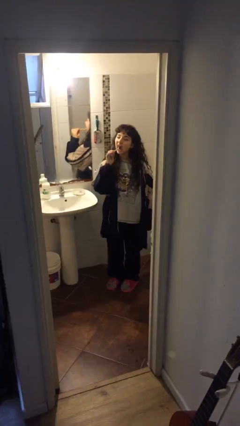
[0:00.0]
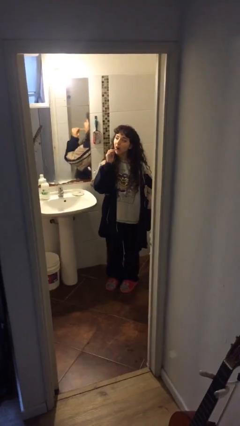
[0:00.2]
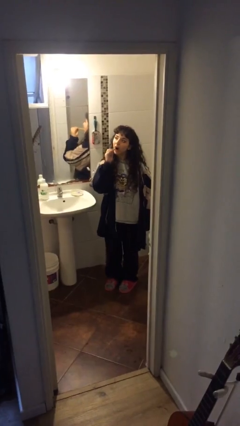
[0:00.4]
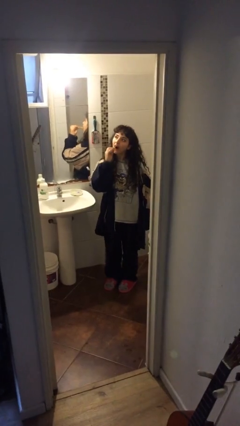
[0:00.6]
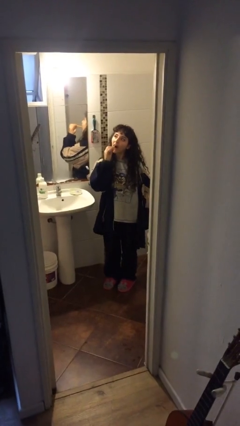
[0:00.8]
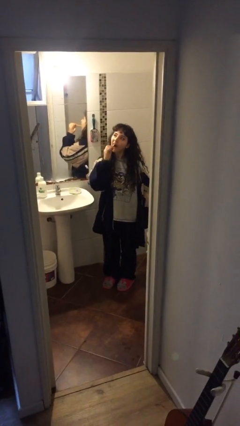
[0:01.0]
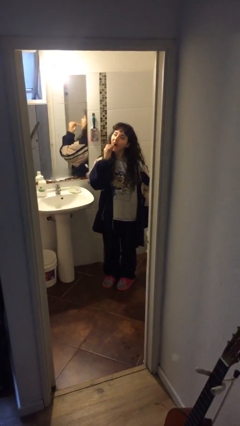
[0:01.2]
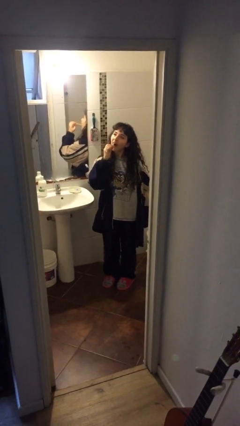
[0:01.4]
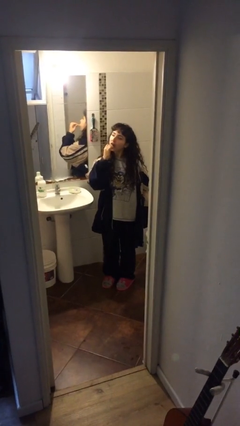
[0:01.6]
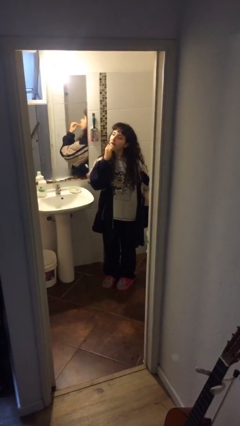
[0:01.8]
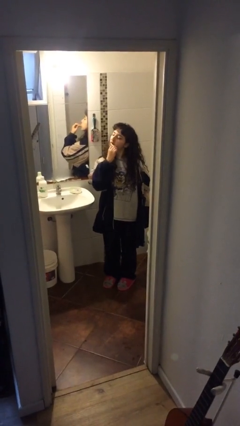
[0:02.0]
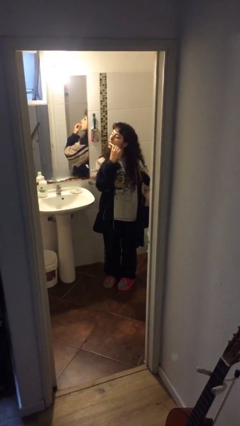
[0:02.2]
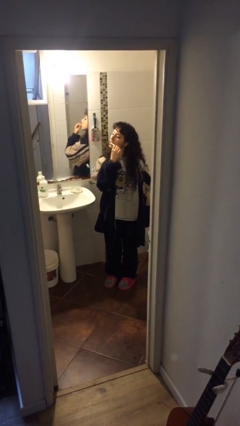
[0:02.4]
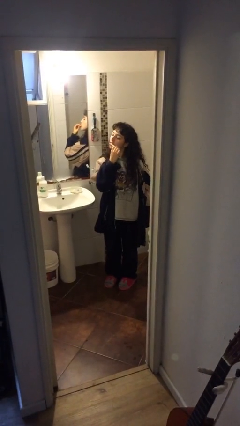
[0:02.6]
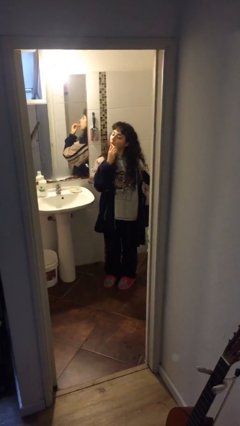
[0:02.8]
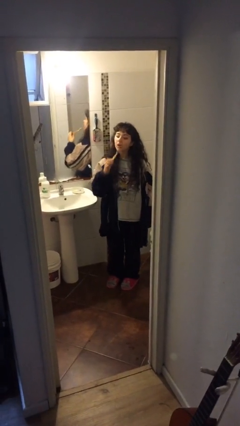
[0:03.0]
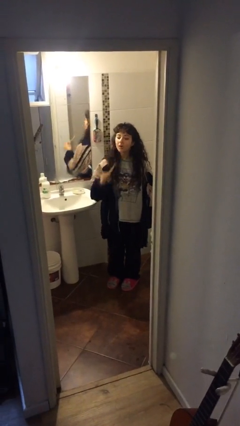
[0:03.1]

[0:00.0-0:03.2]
person brushes teeth

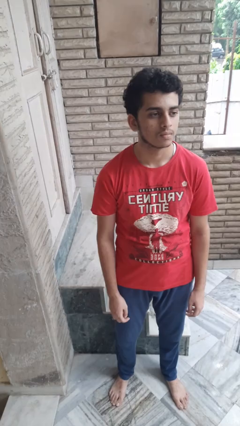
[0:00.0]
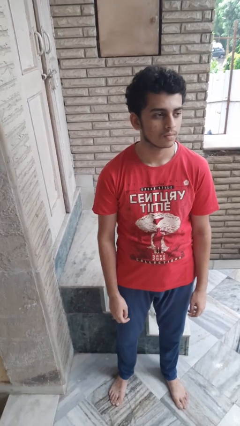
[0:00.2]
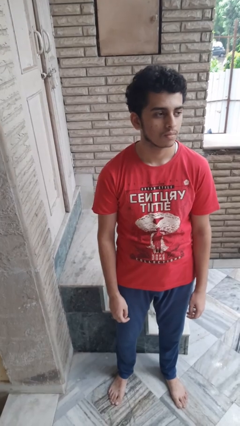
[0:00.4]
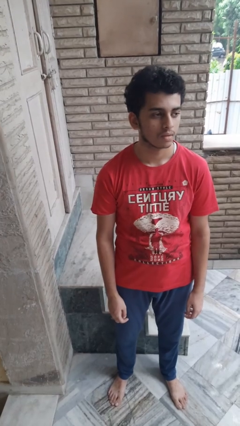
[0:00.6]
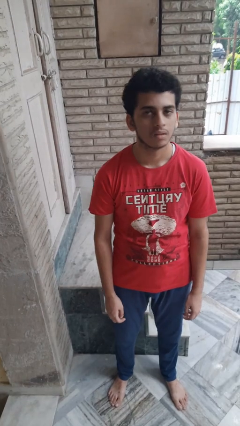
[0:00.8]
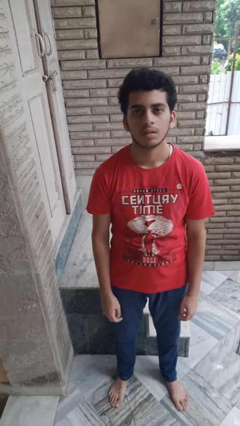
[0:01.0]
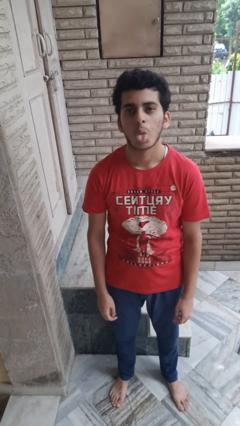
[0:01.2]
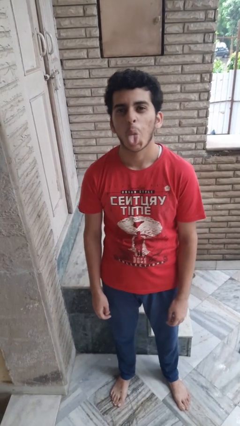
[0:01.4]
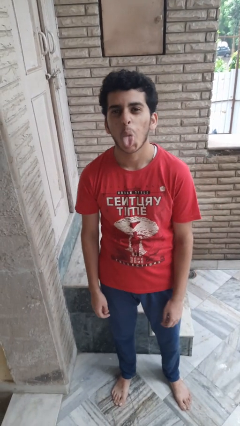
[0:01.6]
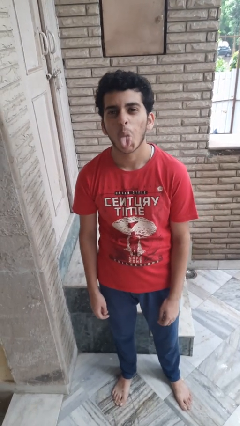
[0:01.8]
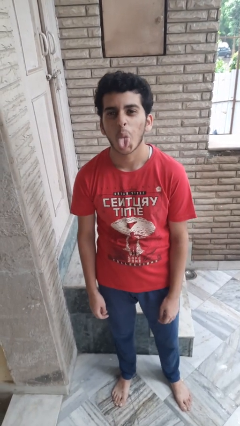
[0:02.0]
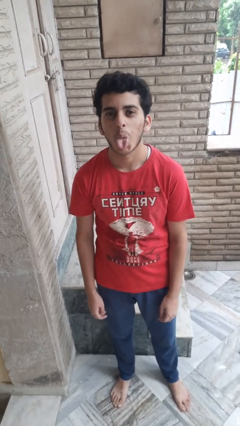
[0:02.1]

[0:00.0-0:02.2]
person sticks out tongue

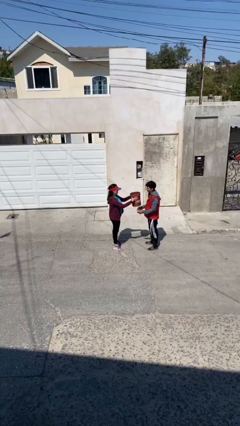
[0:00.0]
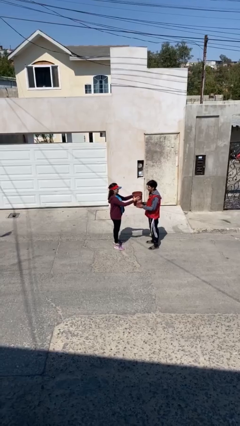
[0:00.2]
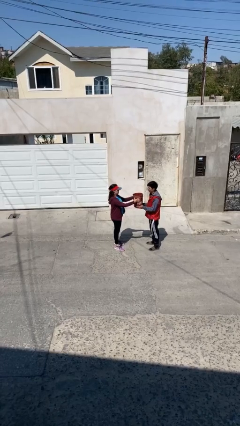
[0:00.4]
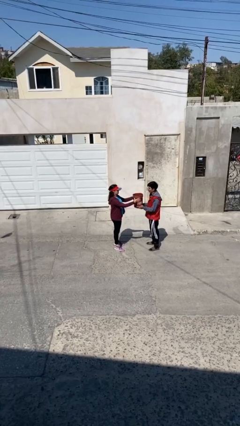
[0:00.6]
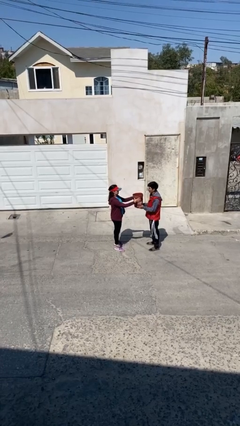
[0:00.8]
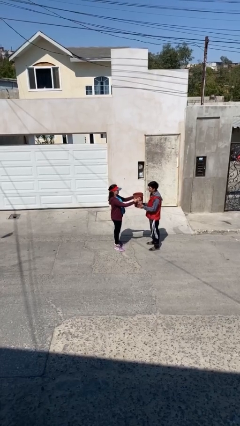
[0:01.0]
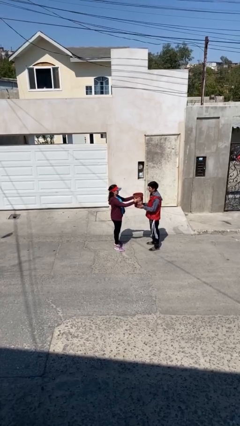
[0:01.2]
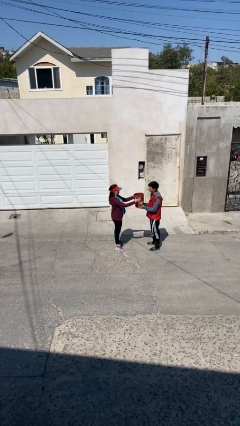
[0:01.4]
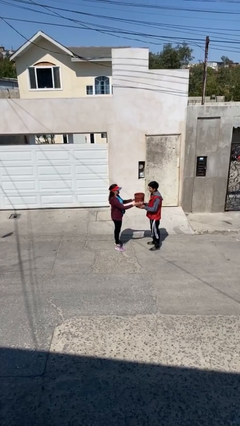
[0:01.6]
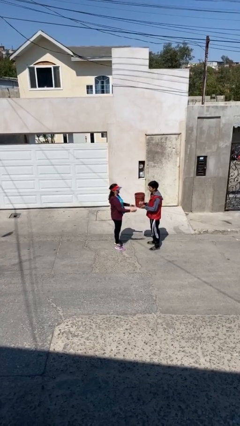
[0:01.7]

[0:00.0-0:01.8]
person transfers object to person

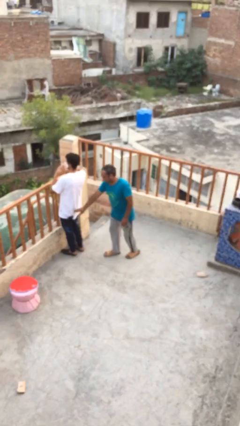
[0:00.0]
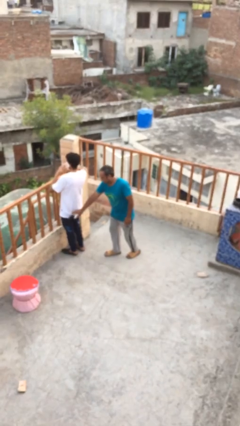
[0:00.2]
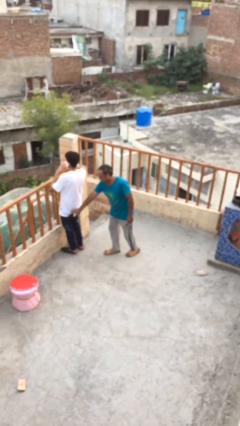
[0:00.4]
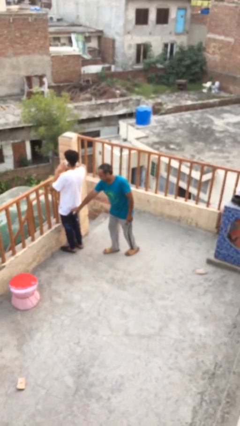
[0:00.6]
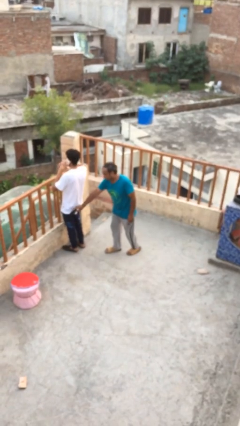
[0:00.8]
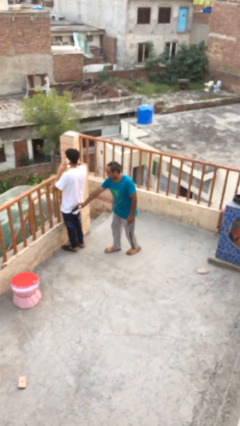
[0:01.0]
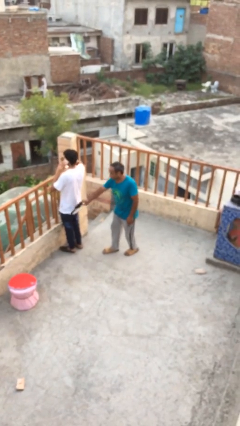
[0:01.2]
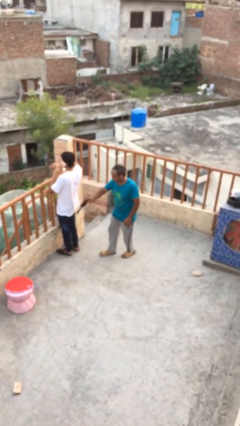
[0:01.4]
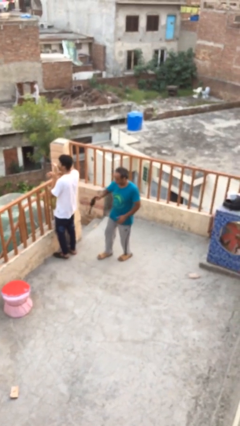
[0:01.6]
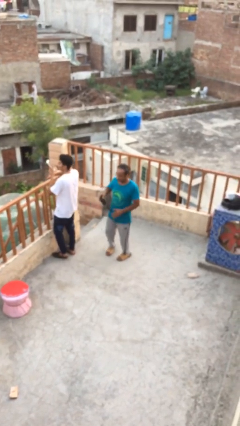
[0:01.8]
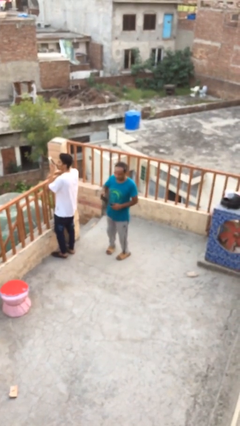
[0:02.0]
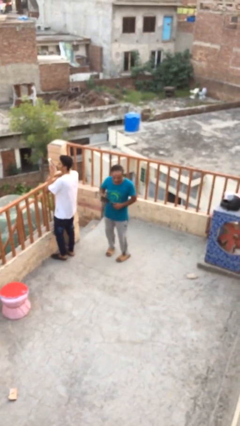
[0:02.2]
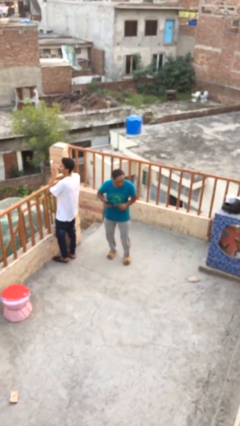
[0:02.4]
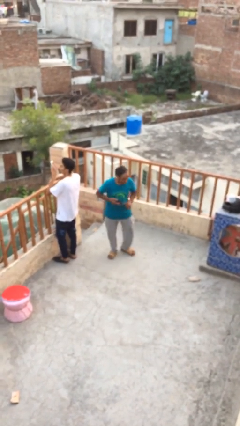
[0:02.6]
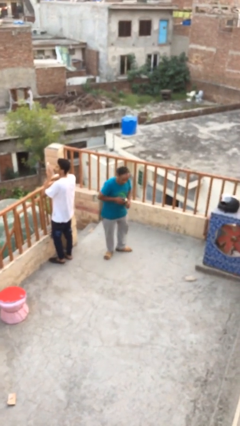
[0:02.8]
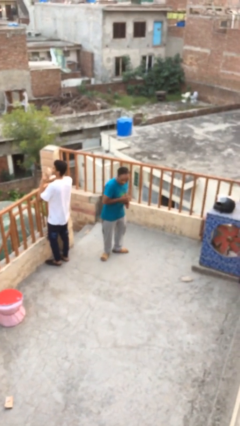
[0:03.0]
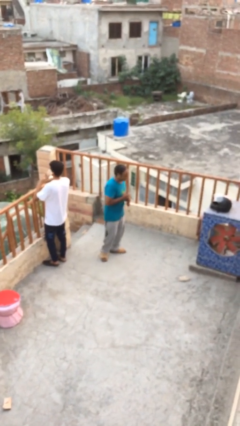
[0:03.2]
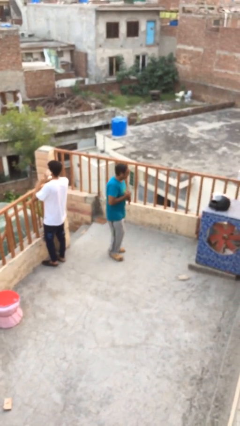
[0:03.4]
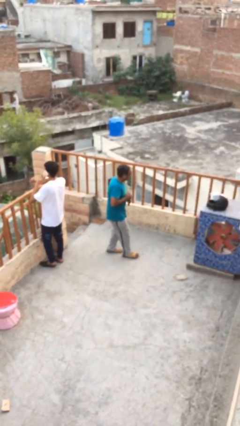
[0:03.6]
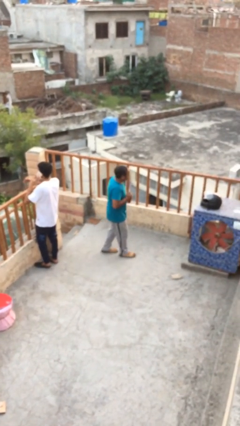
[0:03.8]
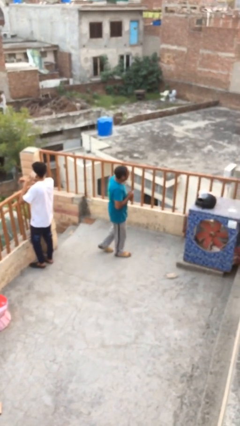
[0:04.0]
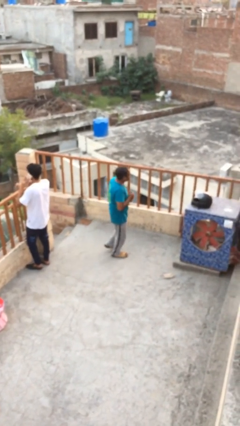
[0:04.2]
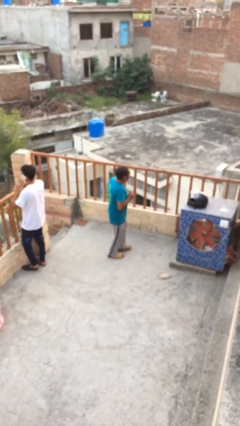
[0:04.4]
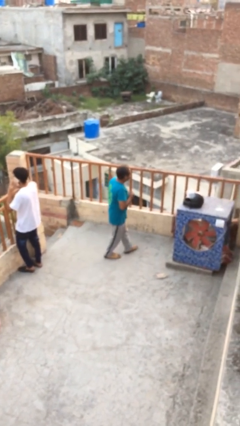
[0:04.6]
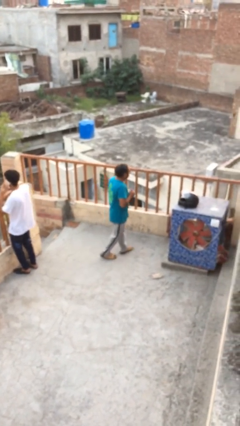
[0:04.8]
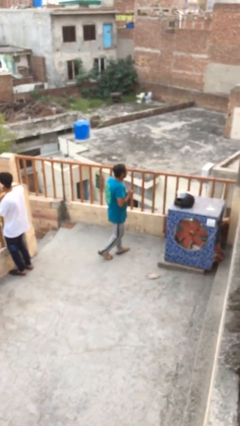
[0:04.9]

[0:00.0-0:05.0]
person steals object from person

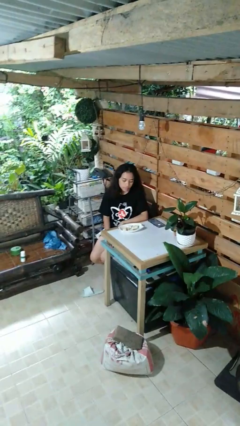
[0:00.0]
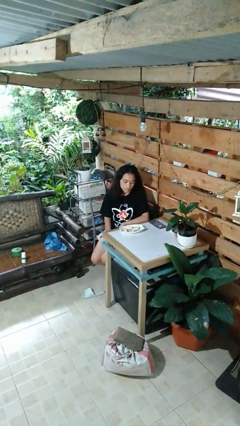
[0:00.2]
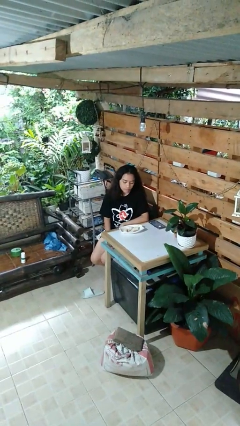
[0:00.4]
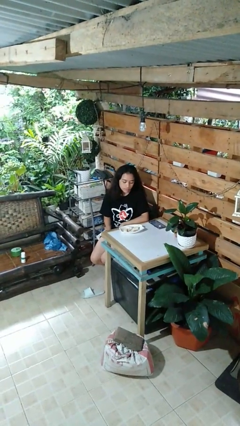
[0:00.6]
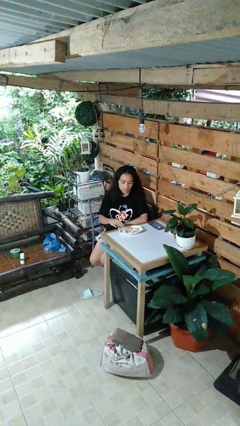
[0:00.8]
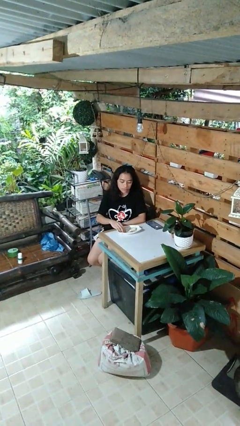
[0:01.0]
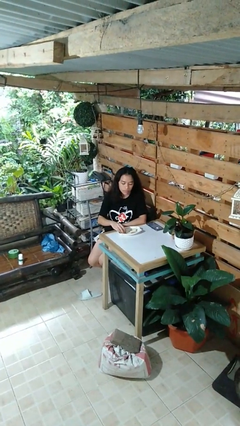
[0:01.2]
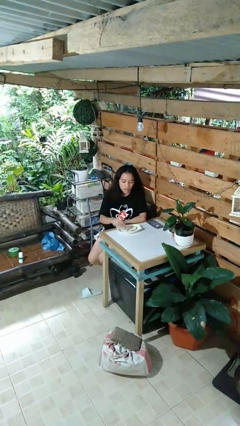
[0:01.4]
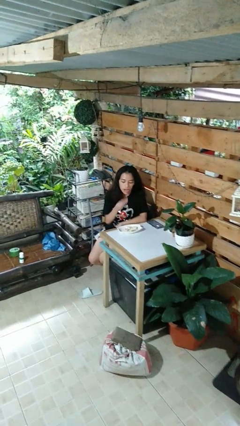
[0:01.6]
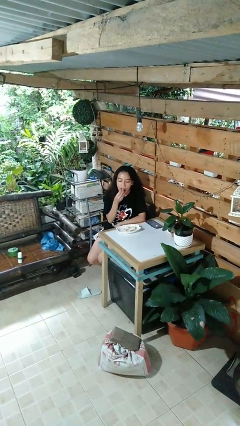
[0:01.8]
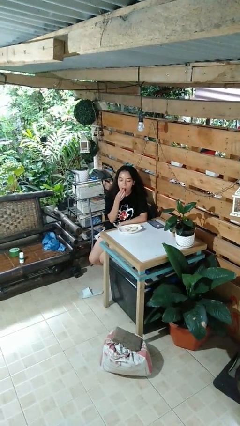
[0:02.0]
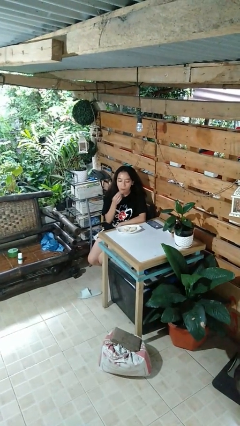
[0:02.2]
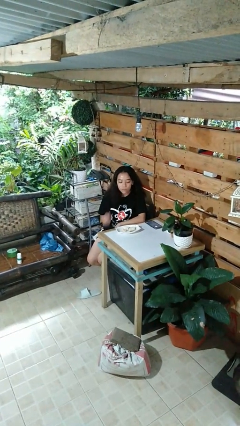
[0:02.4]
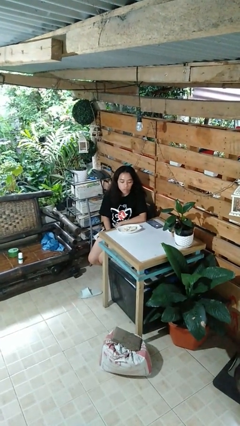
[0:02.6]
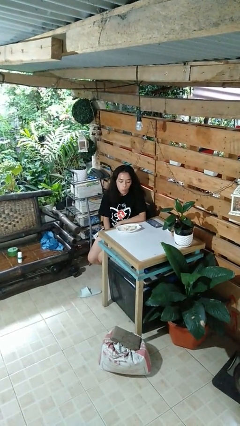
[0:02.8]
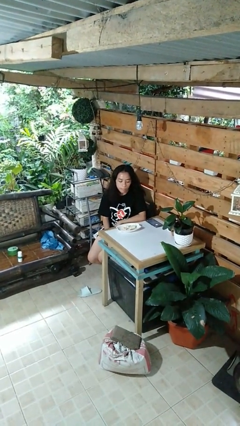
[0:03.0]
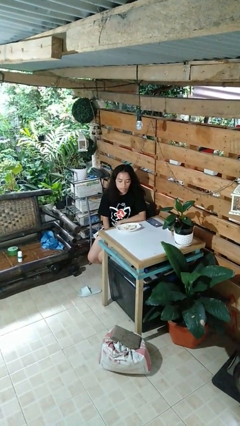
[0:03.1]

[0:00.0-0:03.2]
person eats with hands

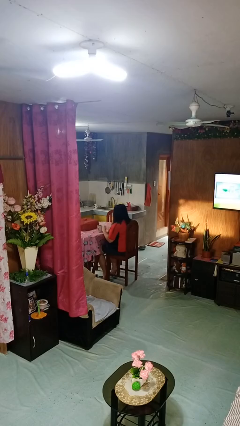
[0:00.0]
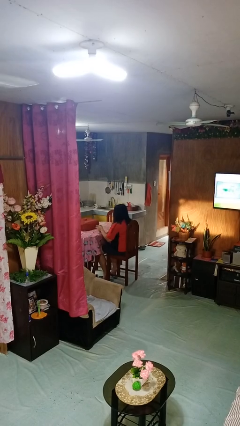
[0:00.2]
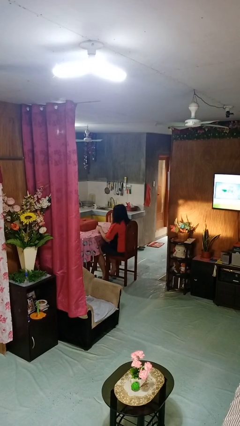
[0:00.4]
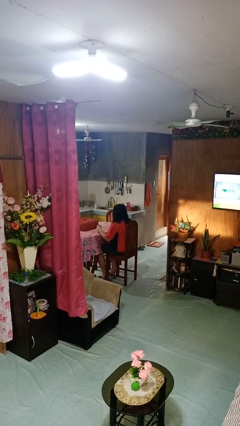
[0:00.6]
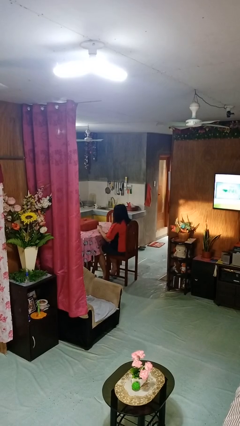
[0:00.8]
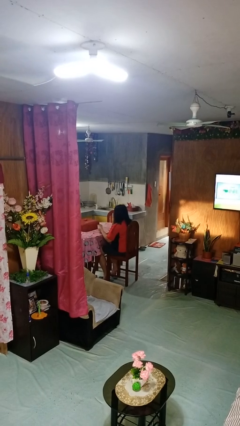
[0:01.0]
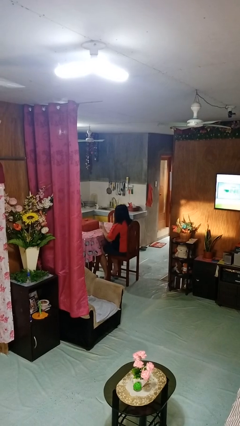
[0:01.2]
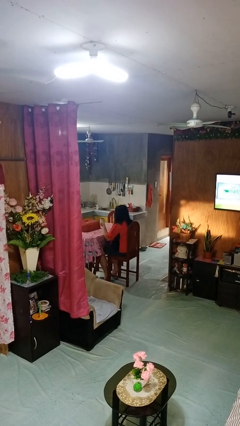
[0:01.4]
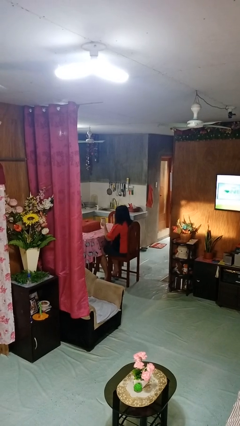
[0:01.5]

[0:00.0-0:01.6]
person picks up object from table

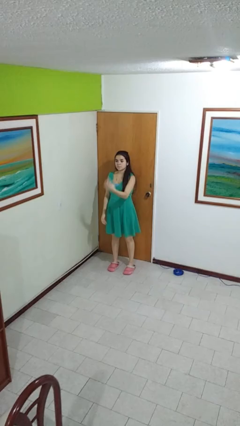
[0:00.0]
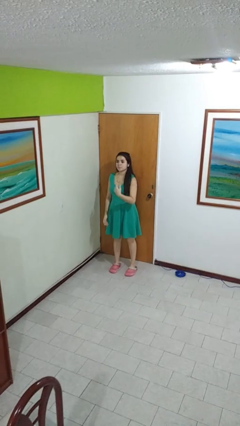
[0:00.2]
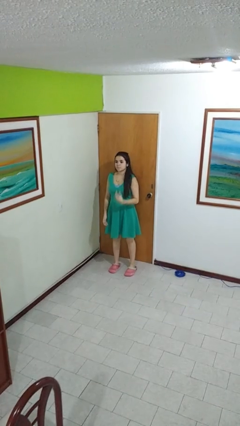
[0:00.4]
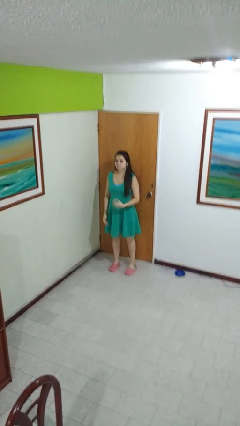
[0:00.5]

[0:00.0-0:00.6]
person gestures come here
